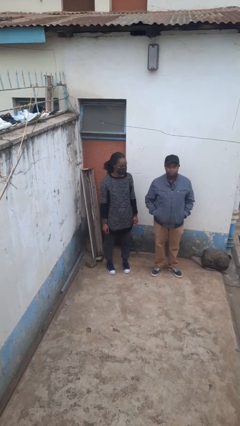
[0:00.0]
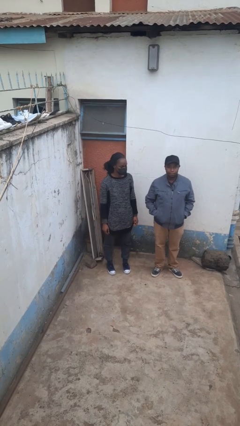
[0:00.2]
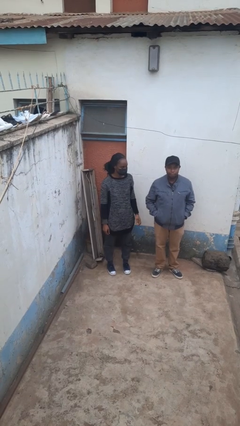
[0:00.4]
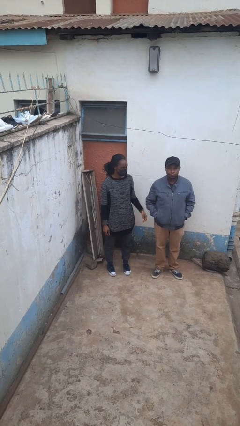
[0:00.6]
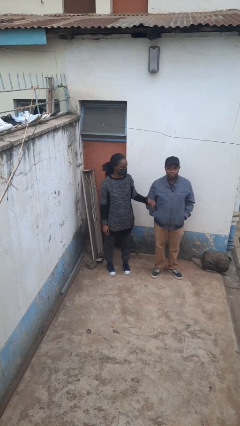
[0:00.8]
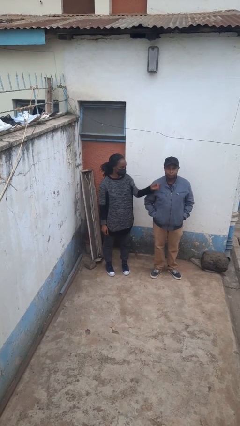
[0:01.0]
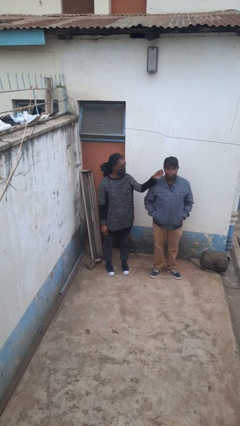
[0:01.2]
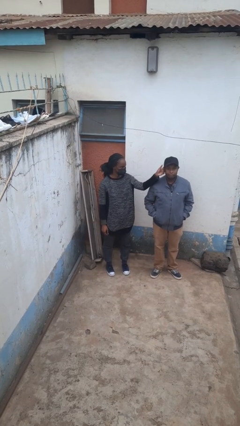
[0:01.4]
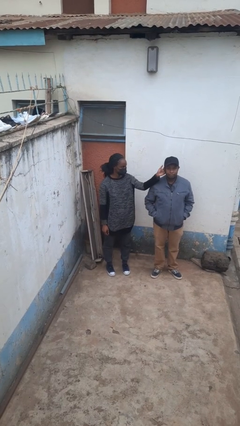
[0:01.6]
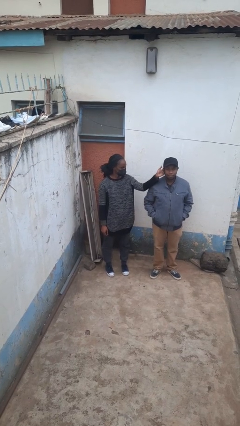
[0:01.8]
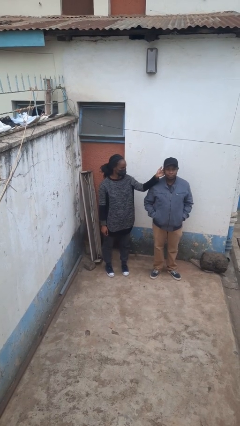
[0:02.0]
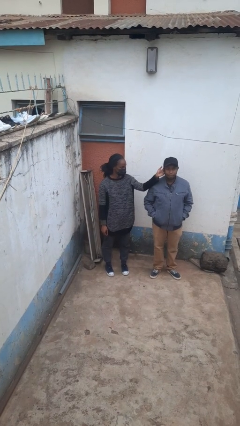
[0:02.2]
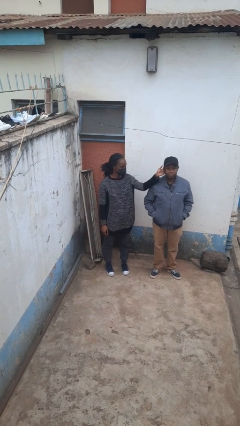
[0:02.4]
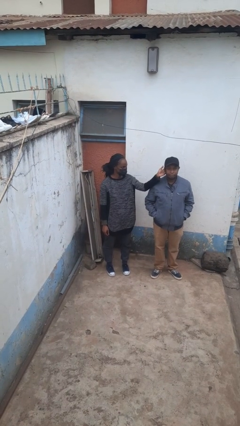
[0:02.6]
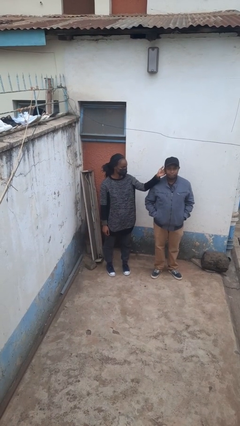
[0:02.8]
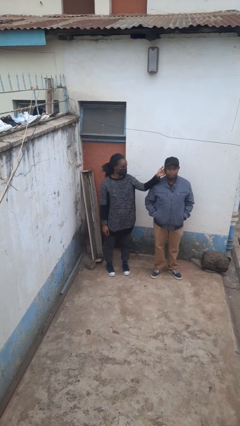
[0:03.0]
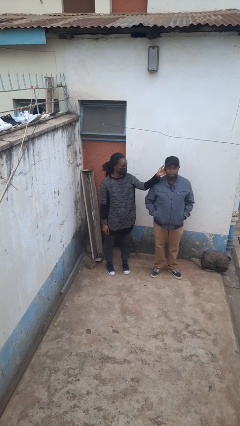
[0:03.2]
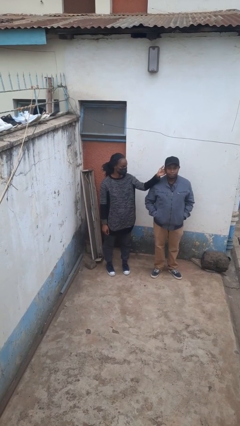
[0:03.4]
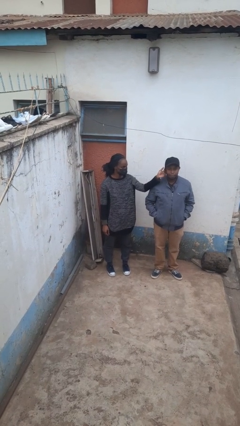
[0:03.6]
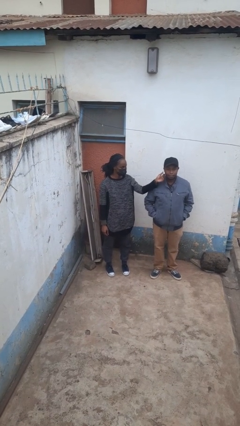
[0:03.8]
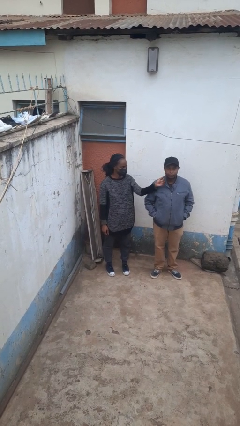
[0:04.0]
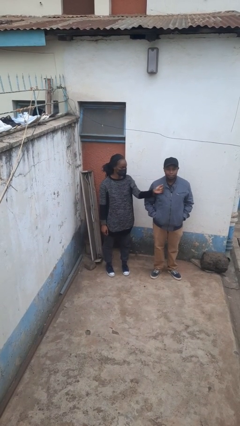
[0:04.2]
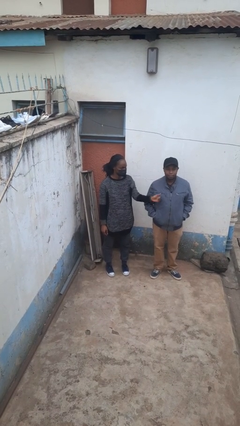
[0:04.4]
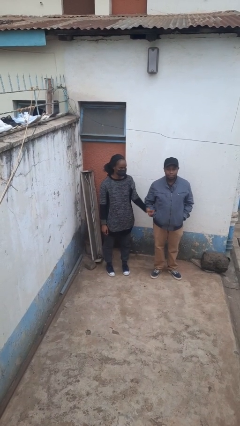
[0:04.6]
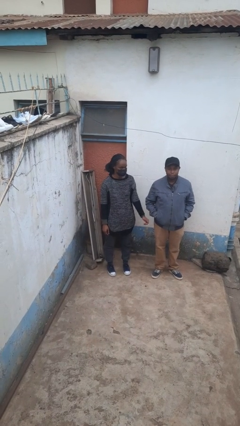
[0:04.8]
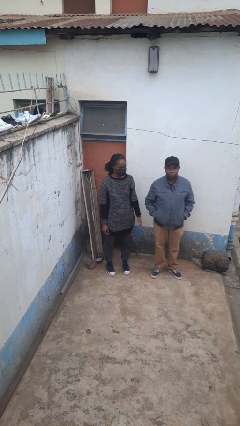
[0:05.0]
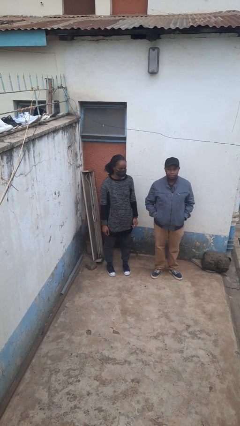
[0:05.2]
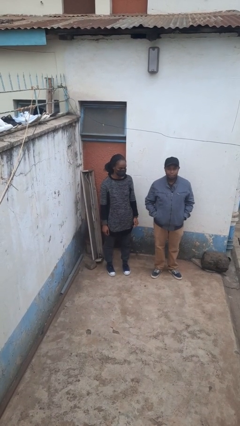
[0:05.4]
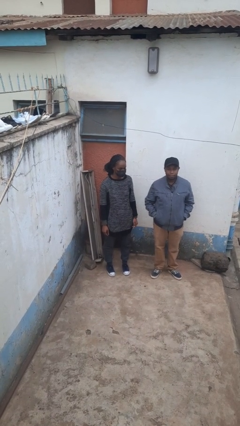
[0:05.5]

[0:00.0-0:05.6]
person touches face of person

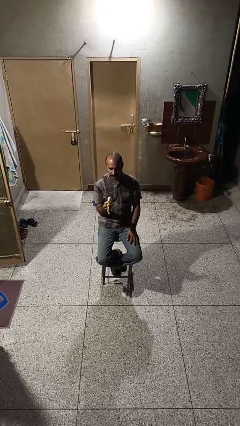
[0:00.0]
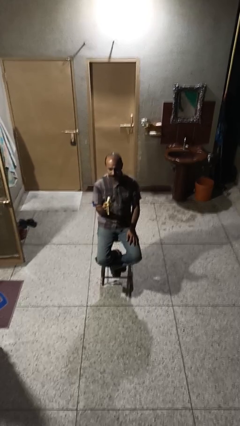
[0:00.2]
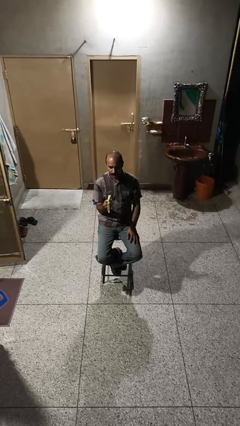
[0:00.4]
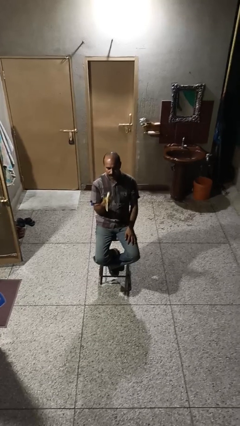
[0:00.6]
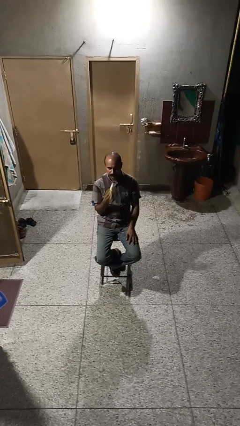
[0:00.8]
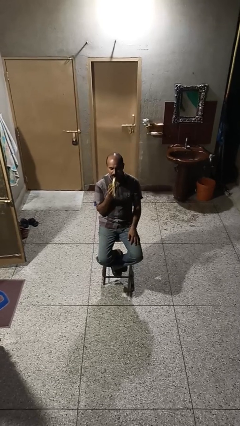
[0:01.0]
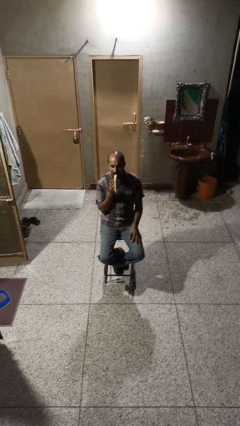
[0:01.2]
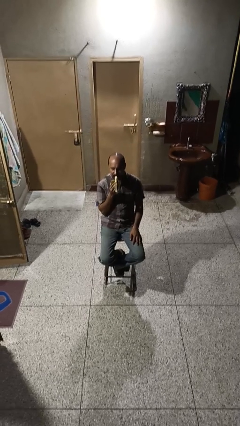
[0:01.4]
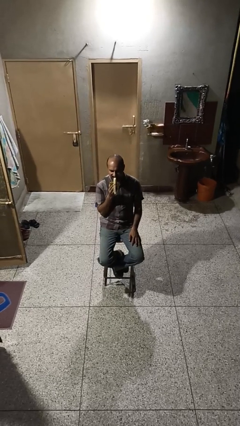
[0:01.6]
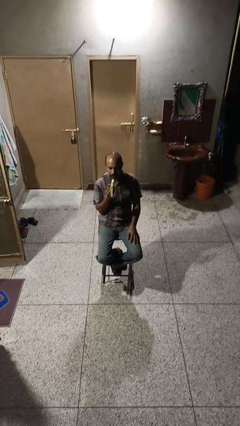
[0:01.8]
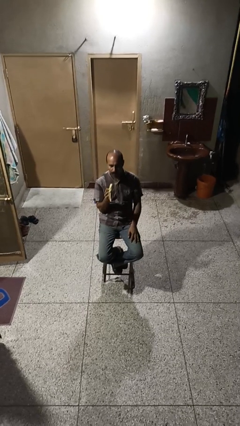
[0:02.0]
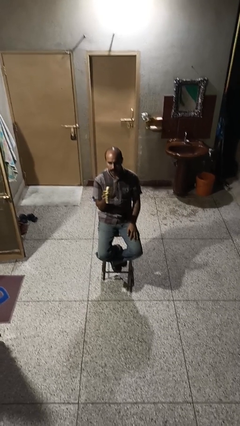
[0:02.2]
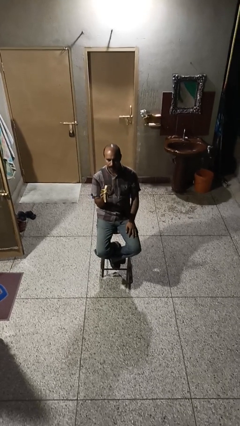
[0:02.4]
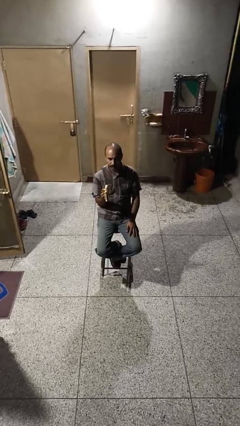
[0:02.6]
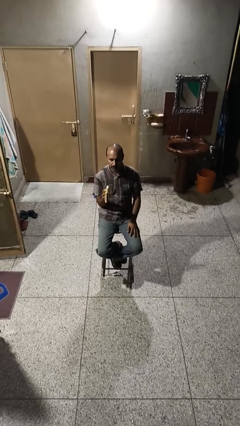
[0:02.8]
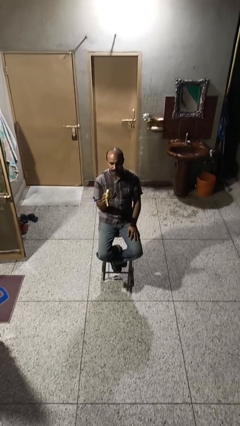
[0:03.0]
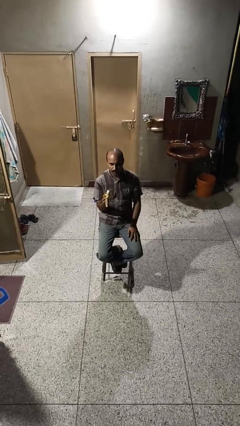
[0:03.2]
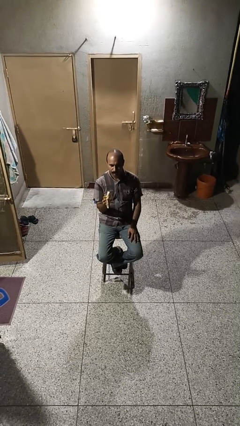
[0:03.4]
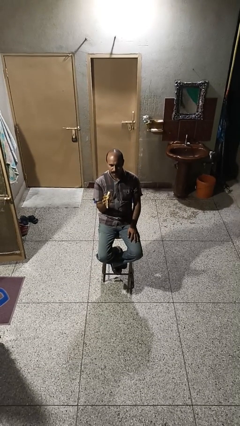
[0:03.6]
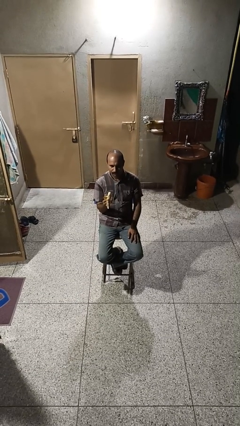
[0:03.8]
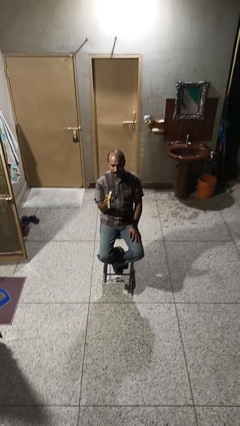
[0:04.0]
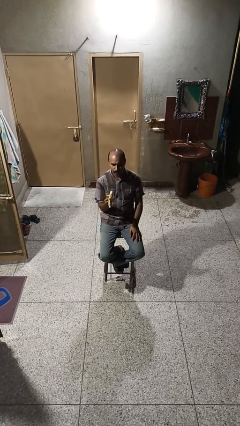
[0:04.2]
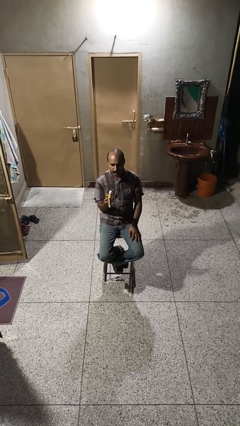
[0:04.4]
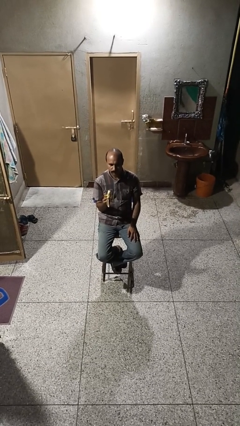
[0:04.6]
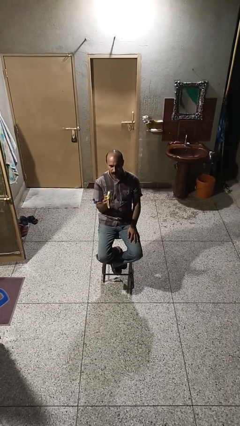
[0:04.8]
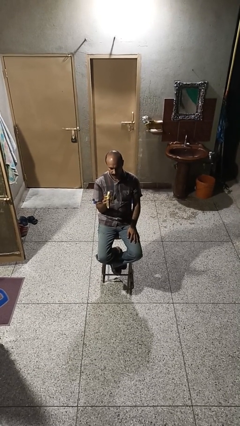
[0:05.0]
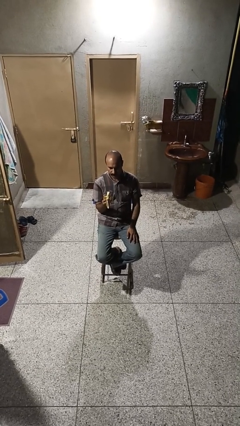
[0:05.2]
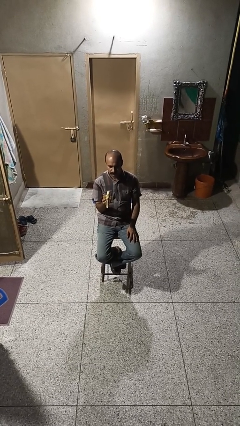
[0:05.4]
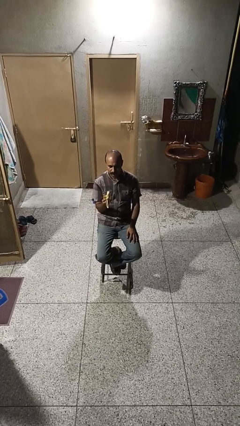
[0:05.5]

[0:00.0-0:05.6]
person eats banana

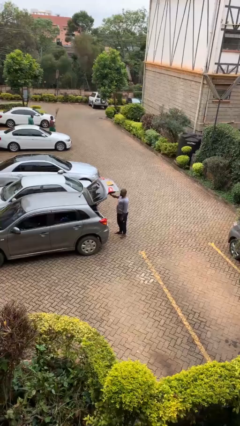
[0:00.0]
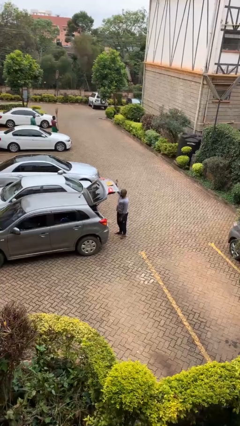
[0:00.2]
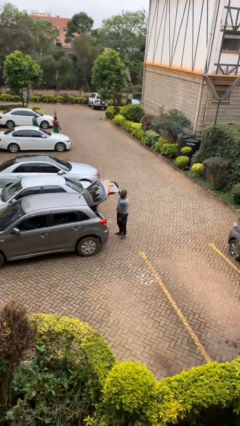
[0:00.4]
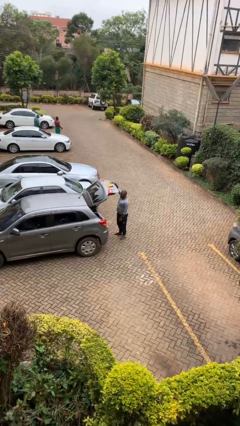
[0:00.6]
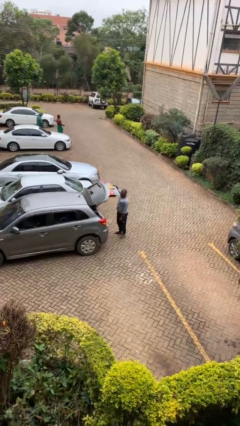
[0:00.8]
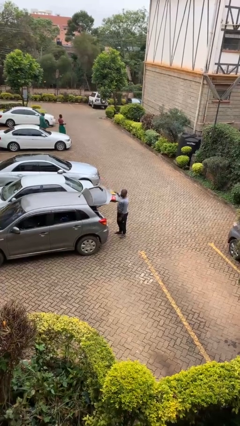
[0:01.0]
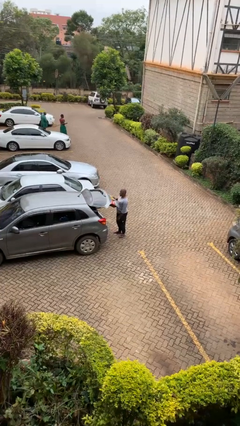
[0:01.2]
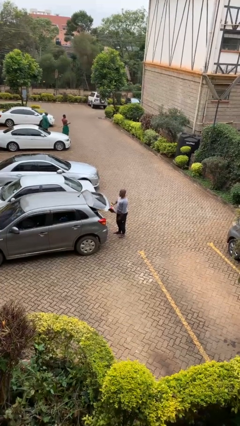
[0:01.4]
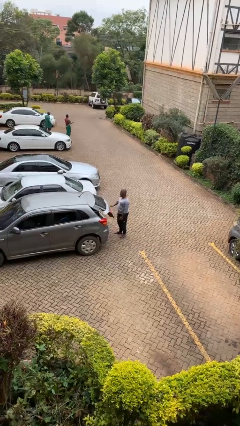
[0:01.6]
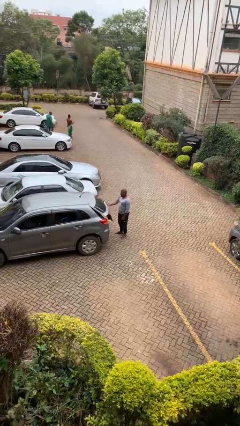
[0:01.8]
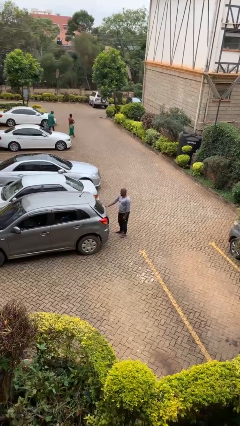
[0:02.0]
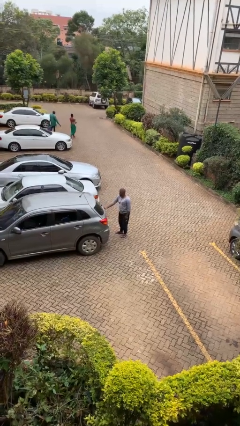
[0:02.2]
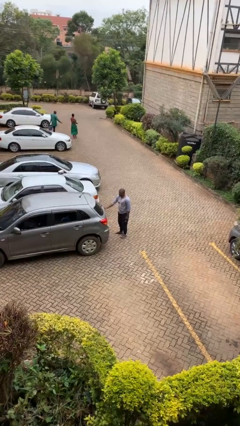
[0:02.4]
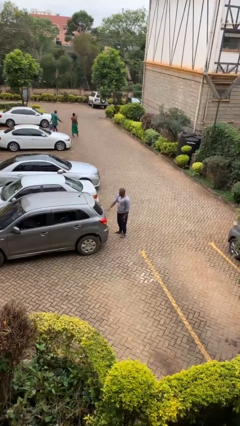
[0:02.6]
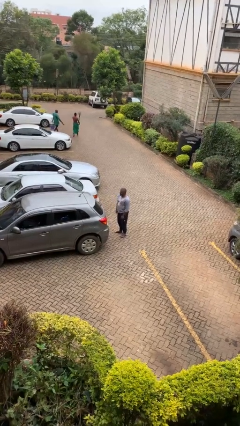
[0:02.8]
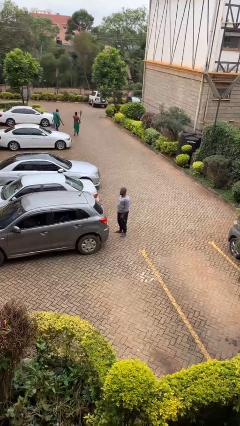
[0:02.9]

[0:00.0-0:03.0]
person closes car trunk

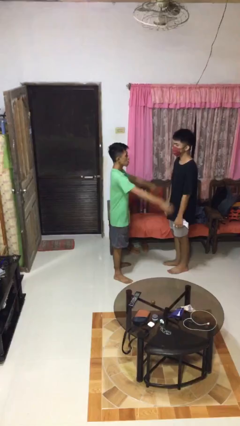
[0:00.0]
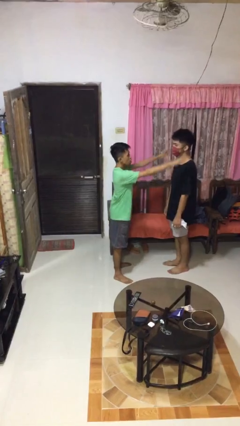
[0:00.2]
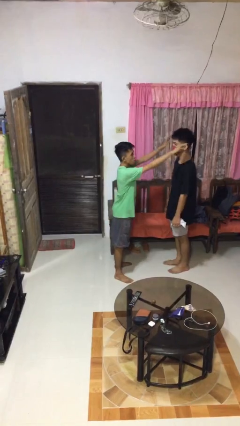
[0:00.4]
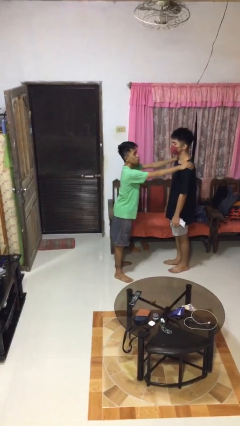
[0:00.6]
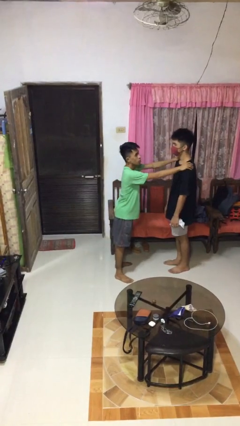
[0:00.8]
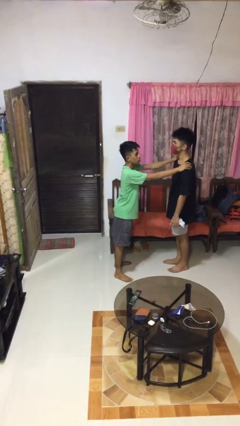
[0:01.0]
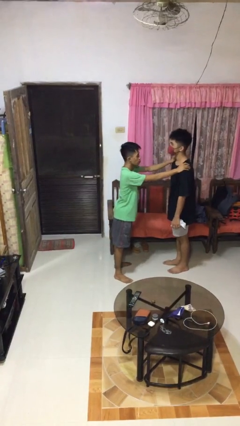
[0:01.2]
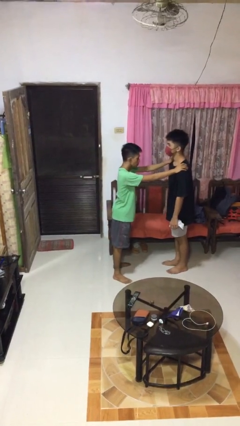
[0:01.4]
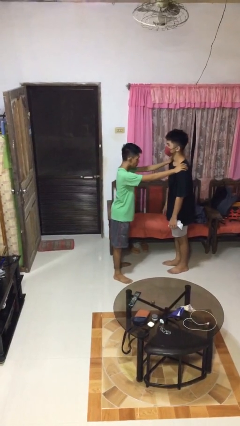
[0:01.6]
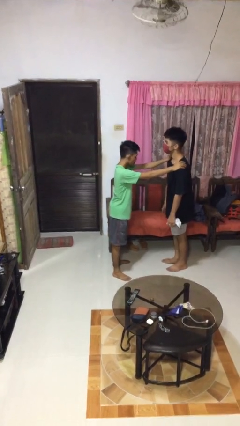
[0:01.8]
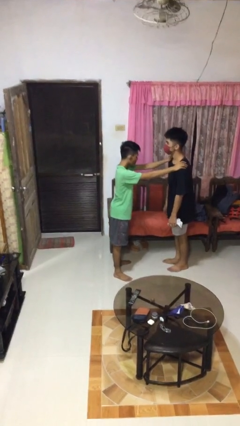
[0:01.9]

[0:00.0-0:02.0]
person grabs person by shoulder

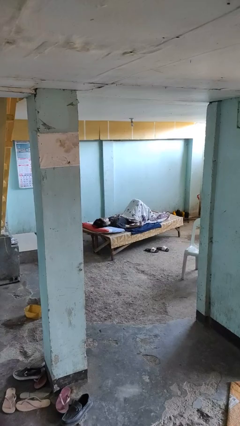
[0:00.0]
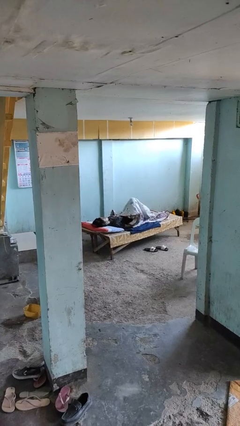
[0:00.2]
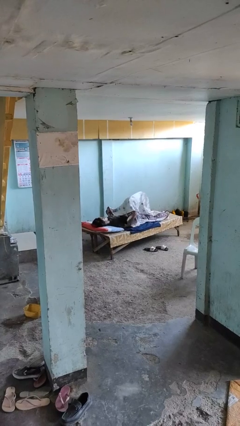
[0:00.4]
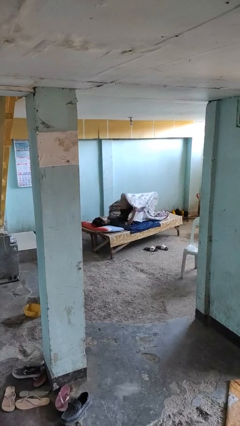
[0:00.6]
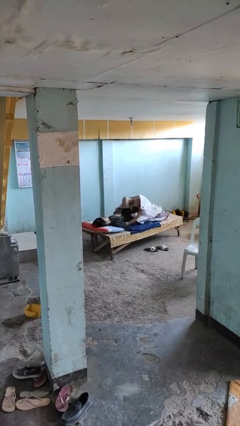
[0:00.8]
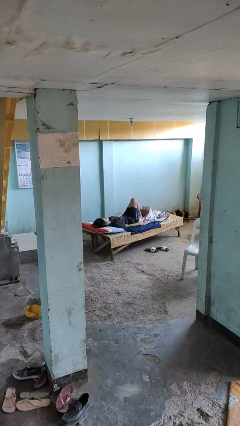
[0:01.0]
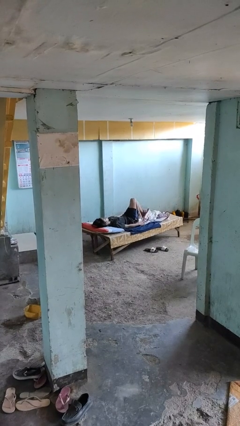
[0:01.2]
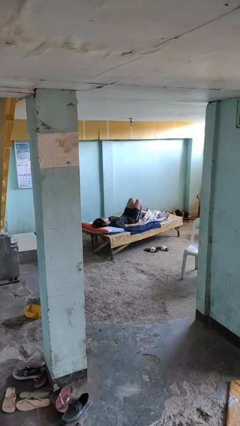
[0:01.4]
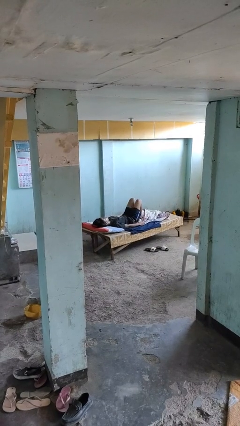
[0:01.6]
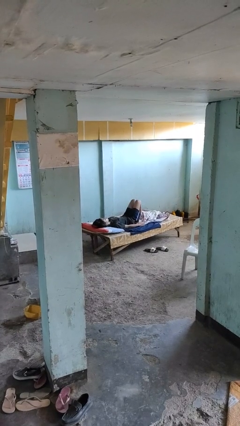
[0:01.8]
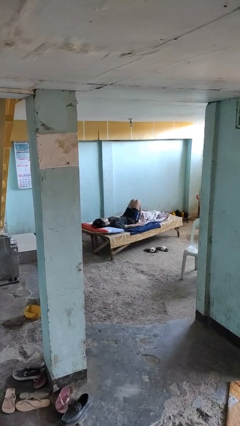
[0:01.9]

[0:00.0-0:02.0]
person uncovers with bedsheets
